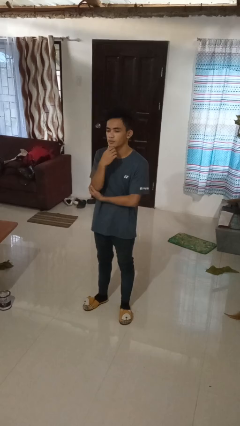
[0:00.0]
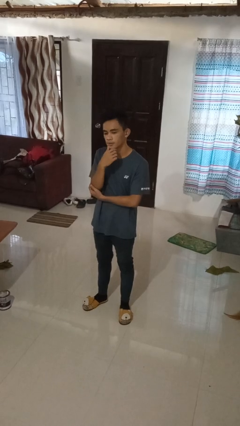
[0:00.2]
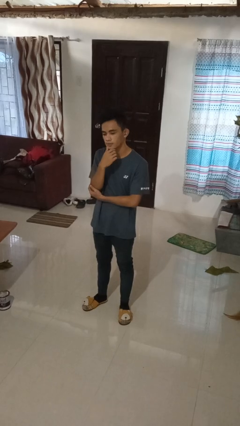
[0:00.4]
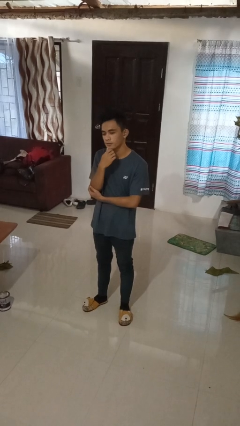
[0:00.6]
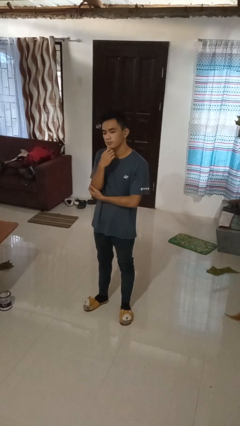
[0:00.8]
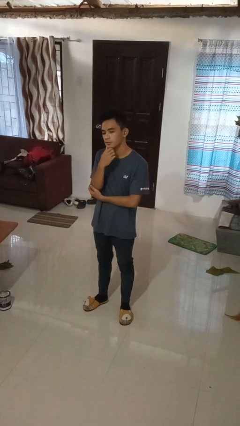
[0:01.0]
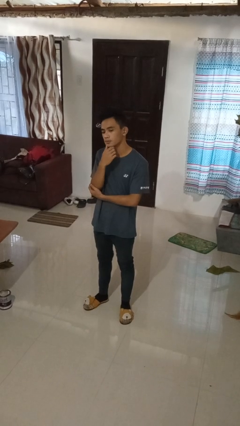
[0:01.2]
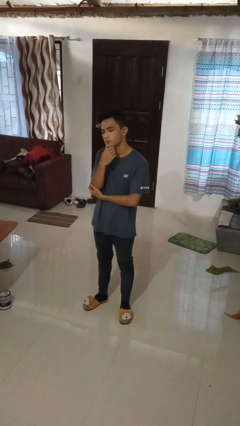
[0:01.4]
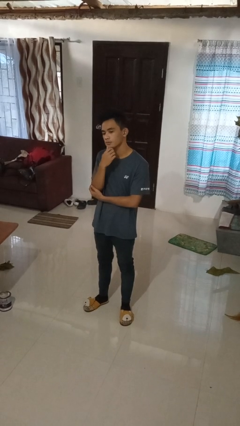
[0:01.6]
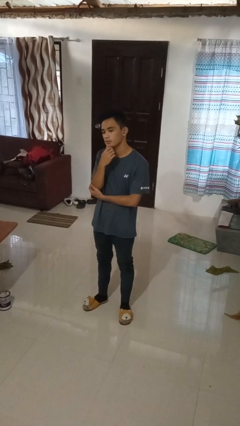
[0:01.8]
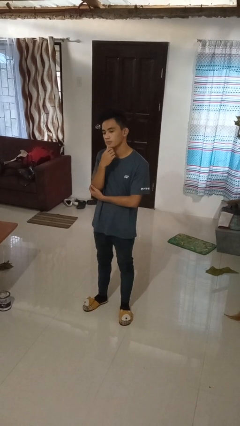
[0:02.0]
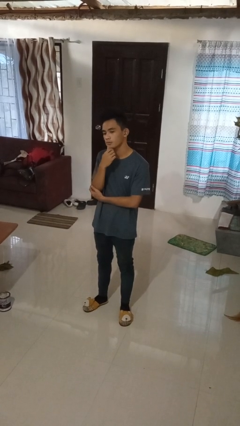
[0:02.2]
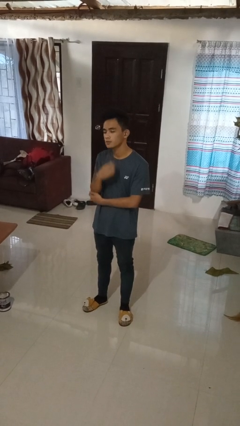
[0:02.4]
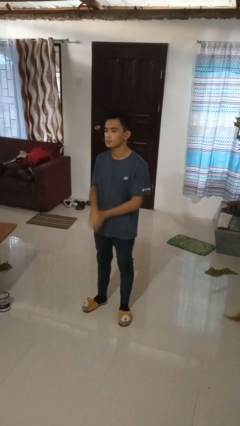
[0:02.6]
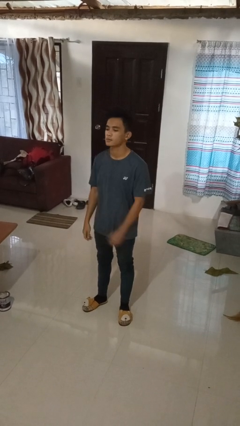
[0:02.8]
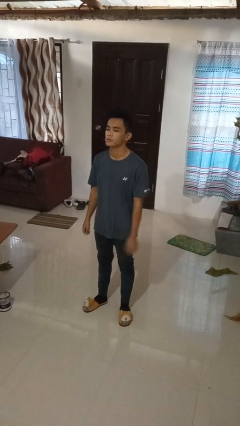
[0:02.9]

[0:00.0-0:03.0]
person strokes chin

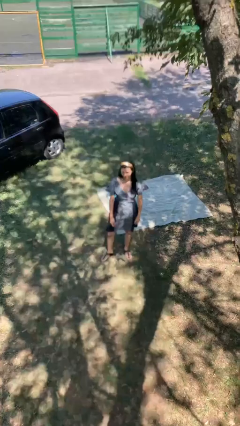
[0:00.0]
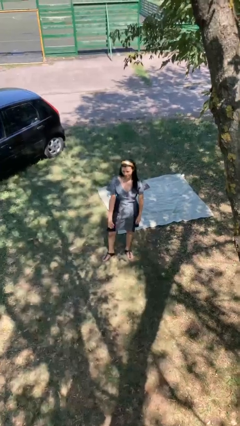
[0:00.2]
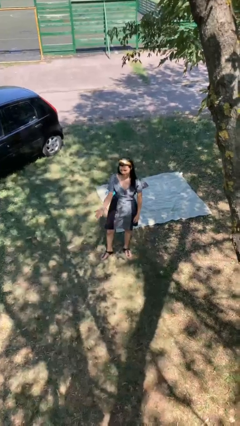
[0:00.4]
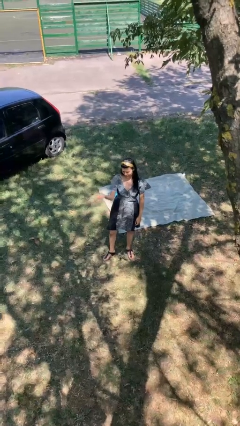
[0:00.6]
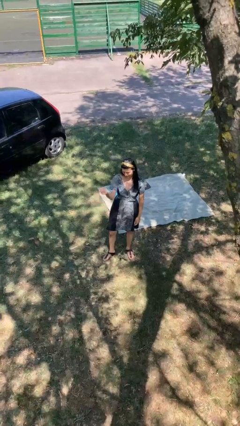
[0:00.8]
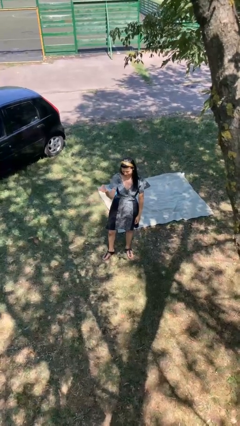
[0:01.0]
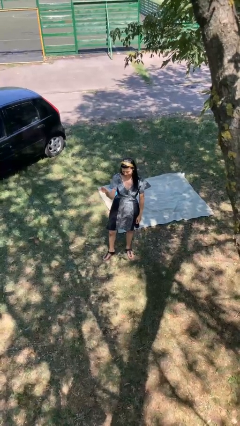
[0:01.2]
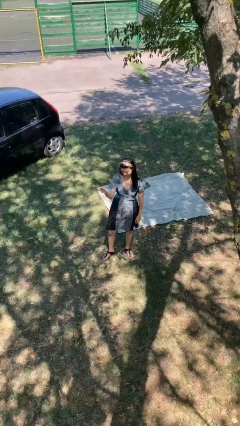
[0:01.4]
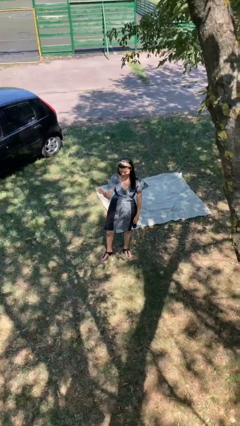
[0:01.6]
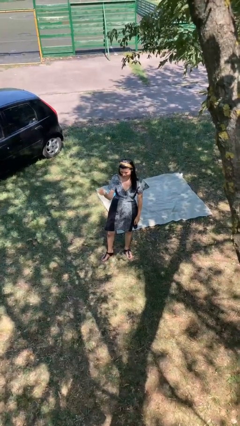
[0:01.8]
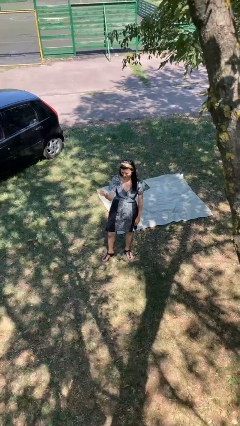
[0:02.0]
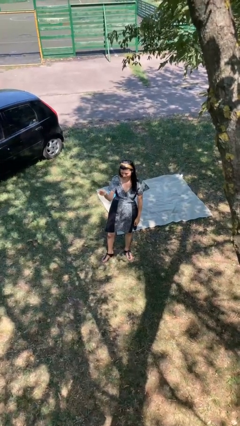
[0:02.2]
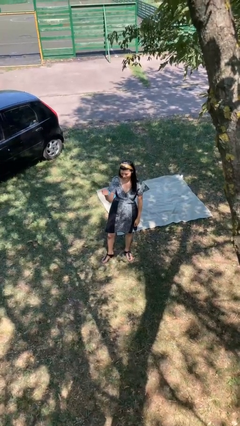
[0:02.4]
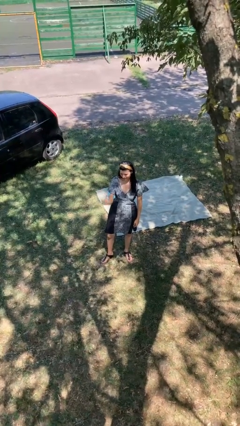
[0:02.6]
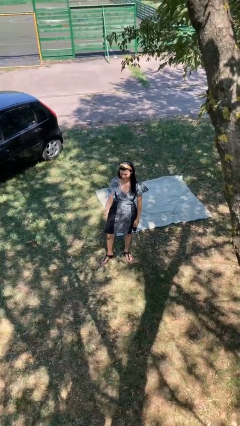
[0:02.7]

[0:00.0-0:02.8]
person gestures come here

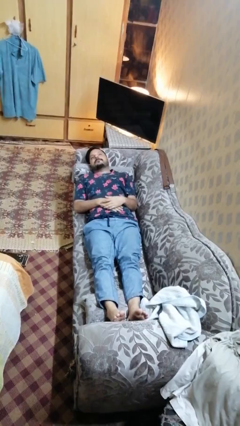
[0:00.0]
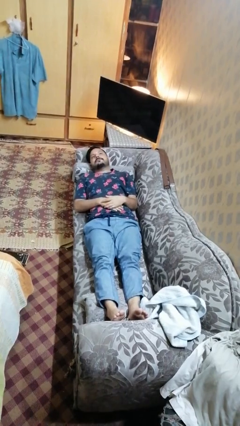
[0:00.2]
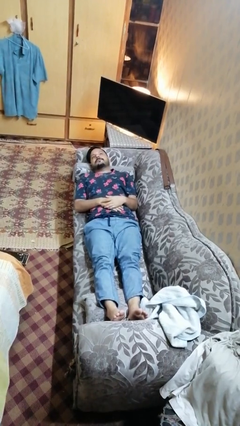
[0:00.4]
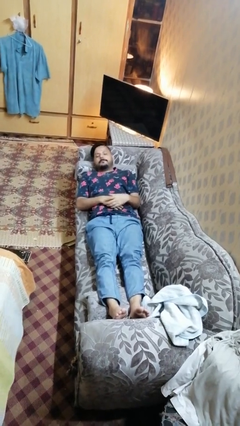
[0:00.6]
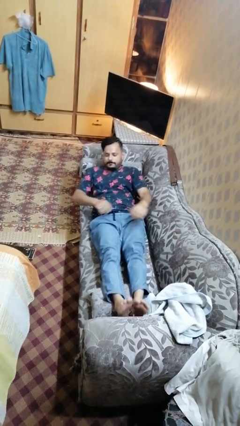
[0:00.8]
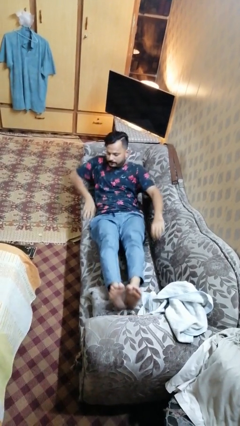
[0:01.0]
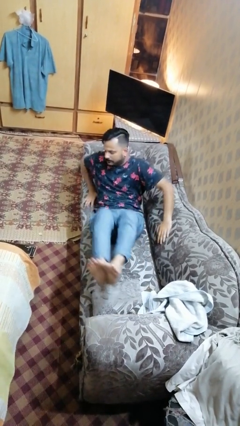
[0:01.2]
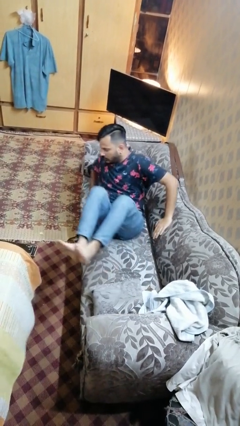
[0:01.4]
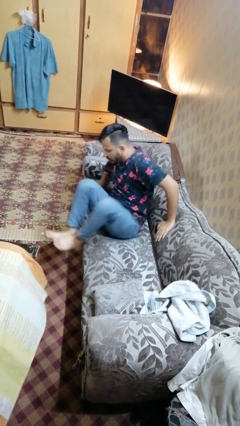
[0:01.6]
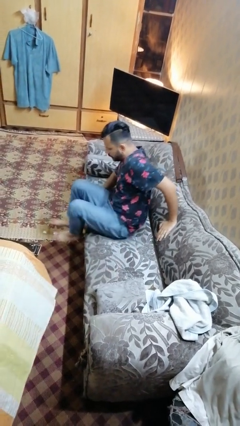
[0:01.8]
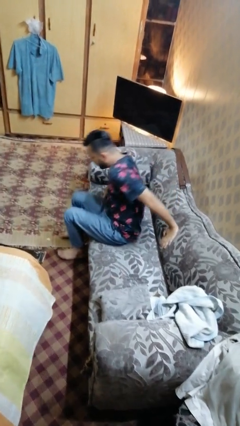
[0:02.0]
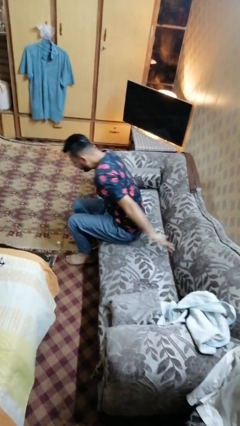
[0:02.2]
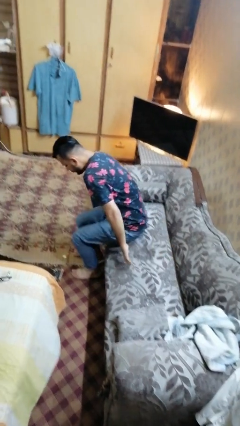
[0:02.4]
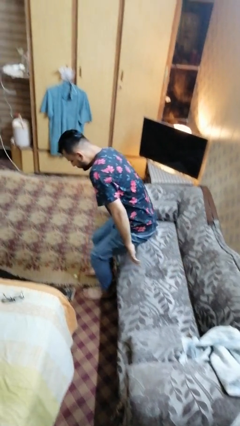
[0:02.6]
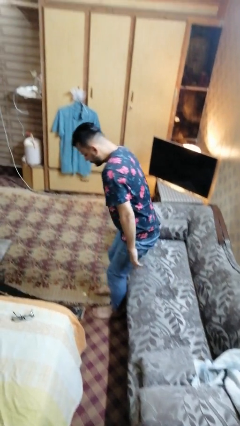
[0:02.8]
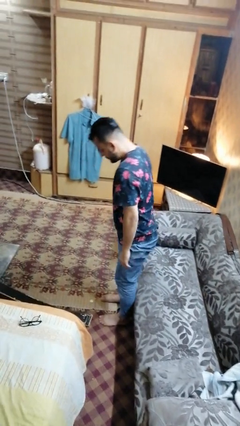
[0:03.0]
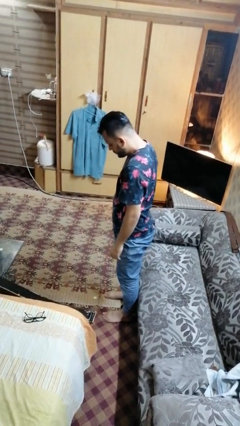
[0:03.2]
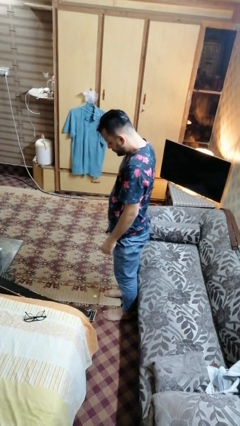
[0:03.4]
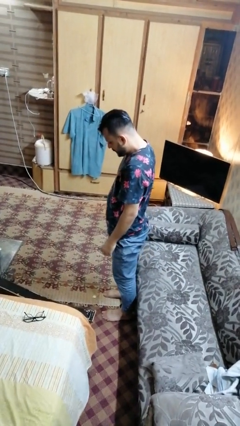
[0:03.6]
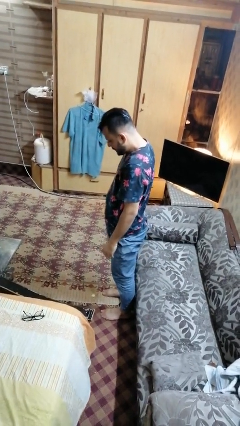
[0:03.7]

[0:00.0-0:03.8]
person stands up

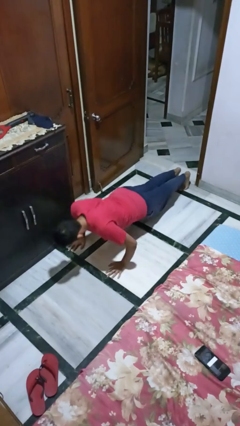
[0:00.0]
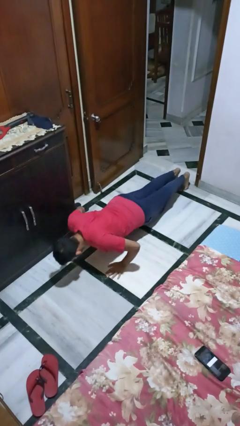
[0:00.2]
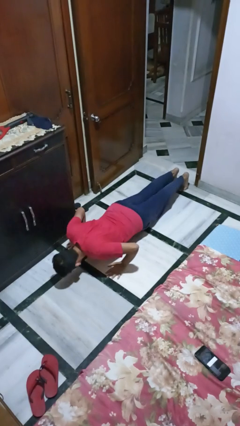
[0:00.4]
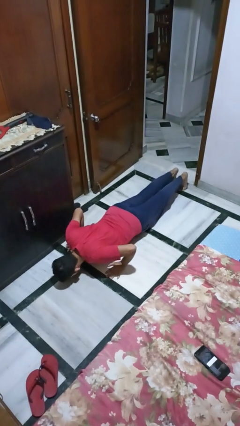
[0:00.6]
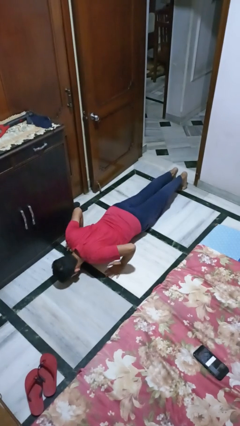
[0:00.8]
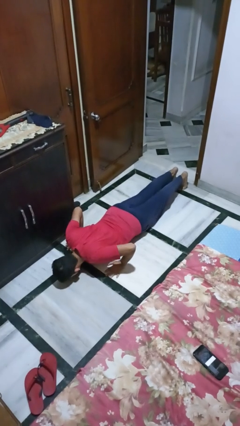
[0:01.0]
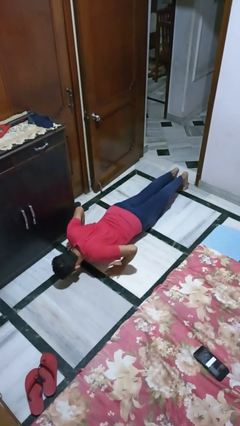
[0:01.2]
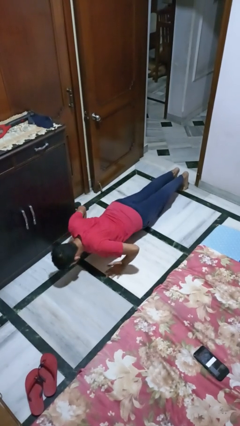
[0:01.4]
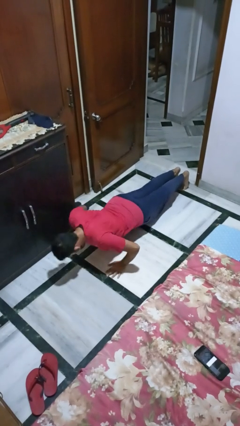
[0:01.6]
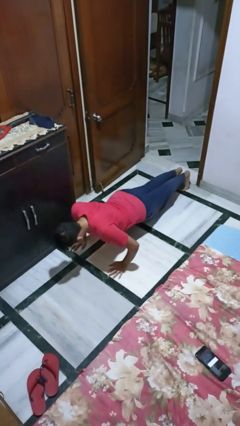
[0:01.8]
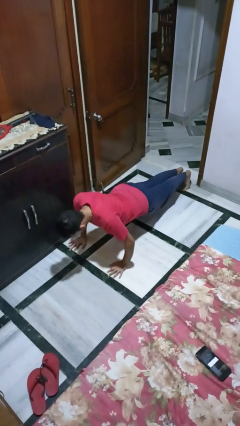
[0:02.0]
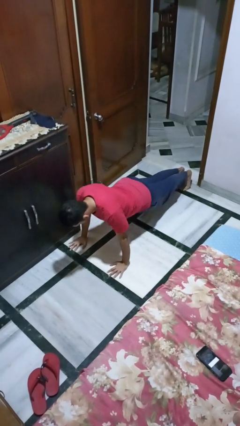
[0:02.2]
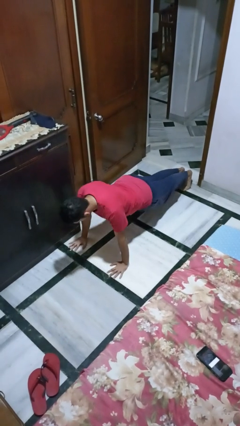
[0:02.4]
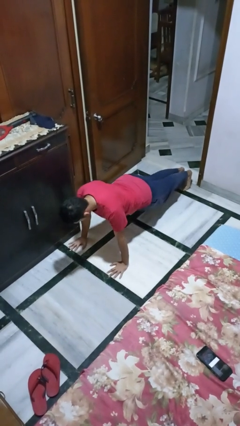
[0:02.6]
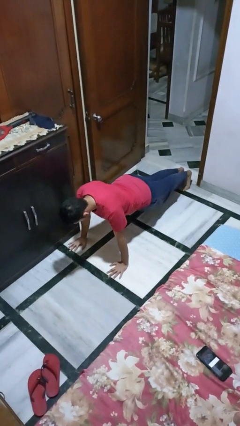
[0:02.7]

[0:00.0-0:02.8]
person exercises with pushup

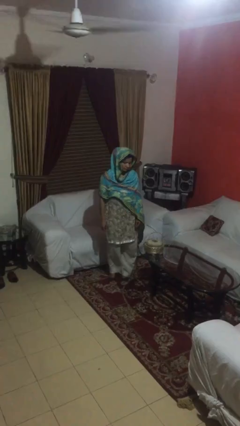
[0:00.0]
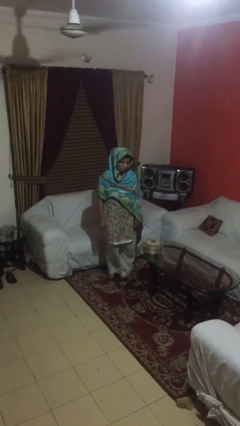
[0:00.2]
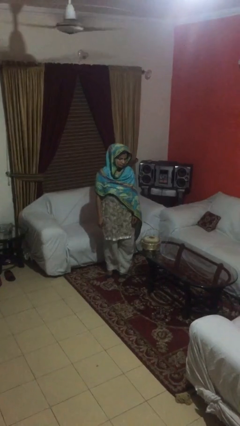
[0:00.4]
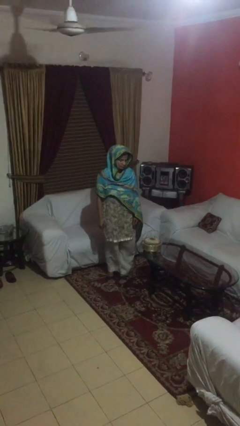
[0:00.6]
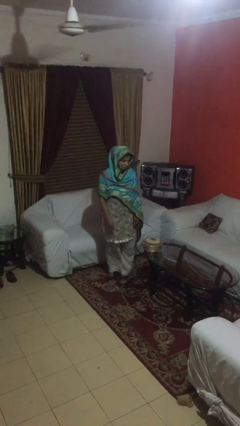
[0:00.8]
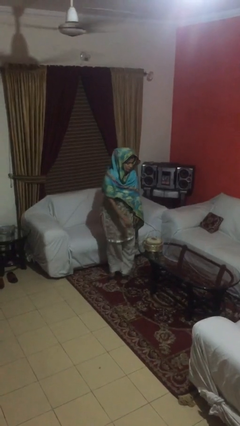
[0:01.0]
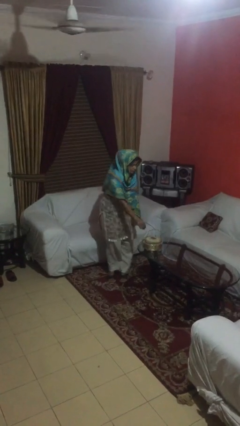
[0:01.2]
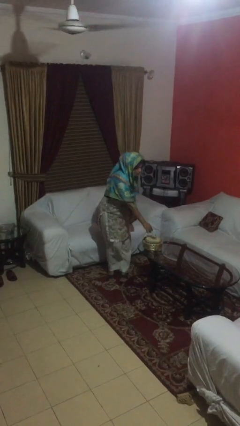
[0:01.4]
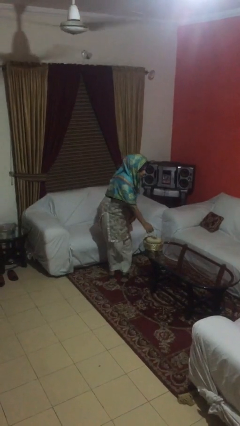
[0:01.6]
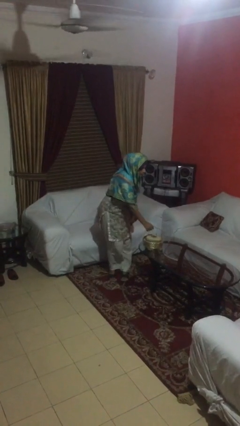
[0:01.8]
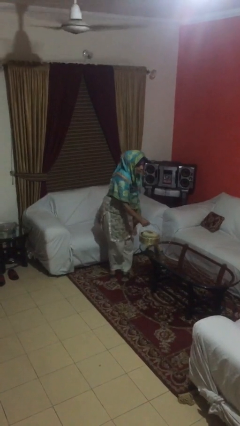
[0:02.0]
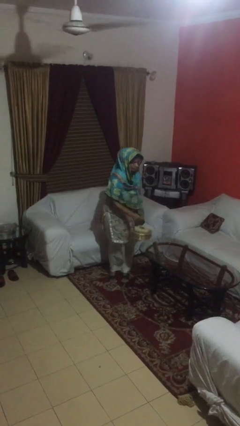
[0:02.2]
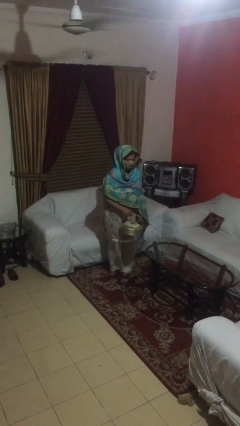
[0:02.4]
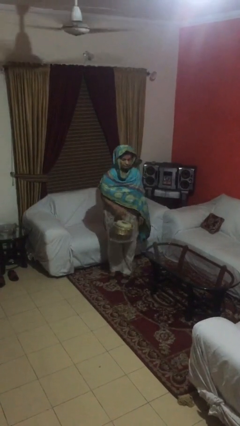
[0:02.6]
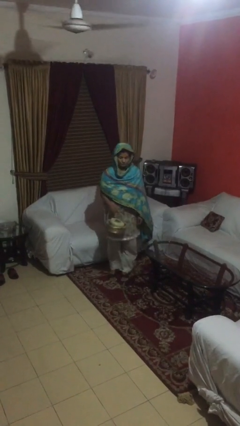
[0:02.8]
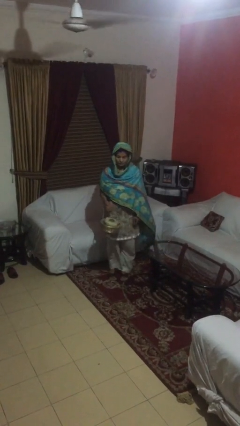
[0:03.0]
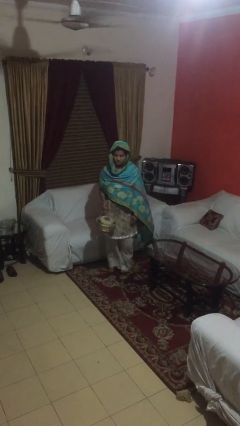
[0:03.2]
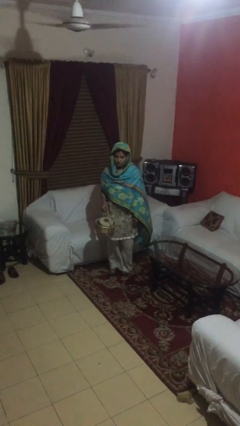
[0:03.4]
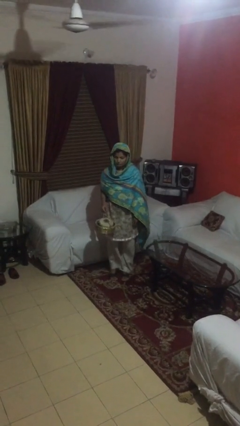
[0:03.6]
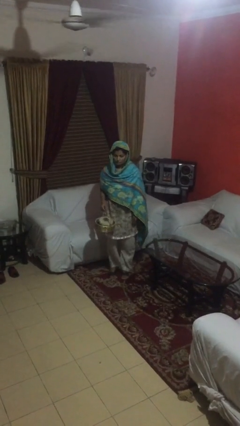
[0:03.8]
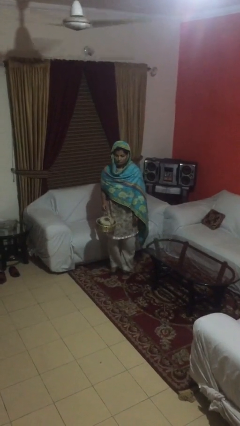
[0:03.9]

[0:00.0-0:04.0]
person picks up object from table

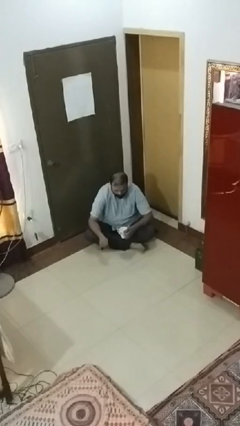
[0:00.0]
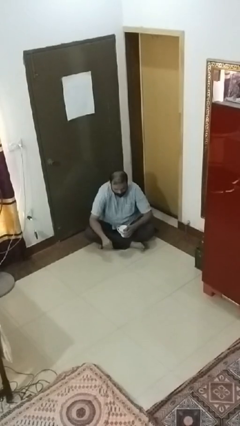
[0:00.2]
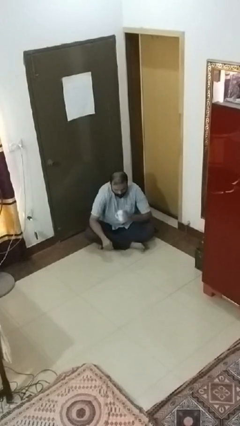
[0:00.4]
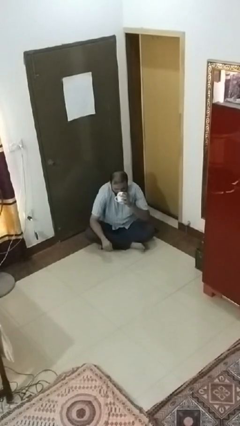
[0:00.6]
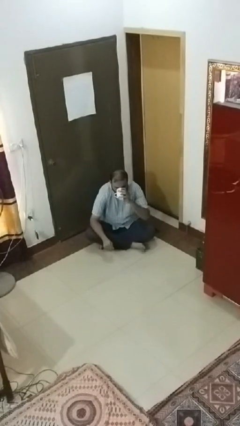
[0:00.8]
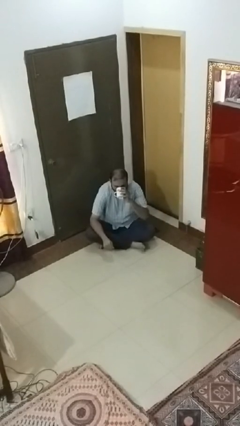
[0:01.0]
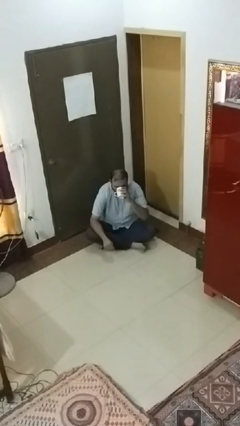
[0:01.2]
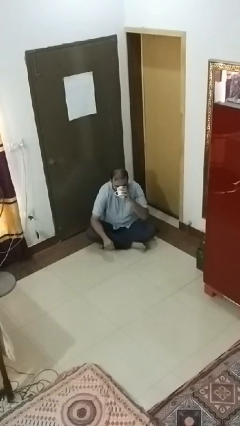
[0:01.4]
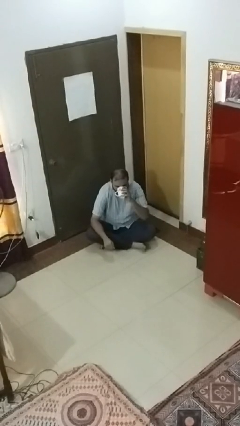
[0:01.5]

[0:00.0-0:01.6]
person drinks from mug
